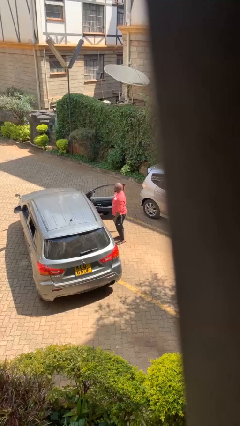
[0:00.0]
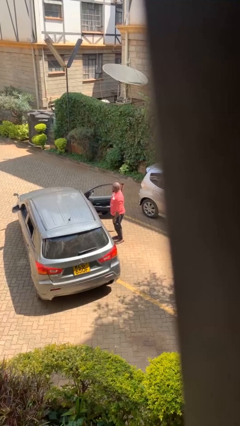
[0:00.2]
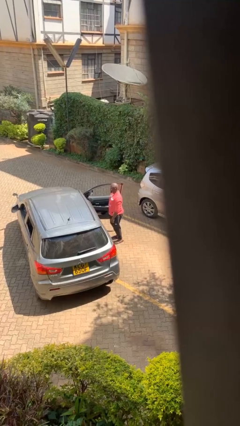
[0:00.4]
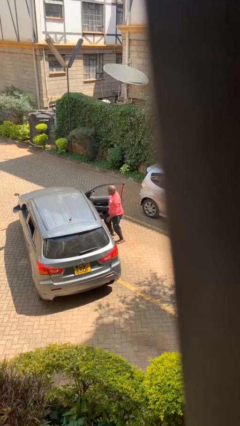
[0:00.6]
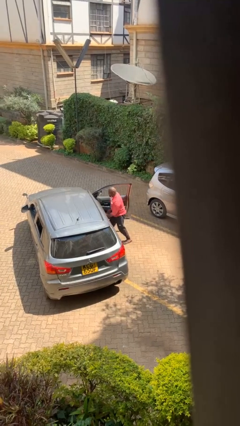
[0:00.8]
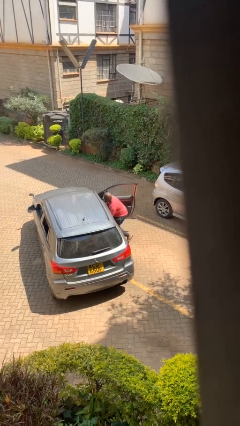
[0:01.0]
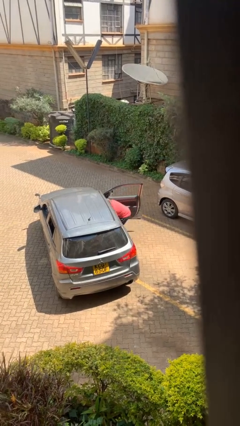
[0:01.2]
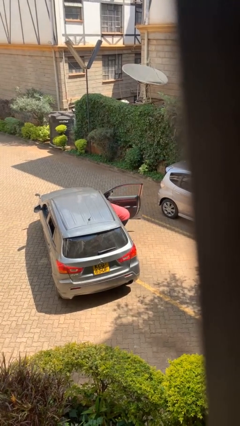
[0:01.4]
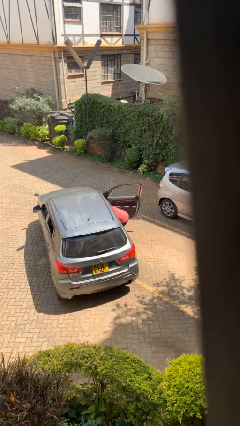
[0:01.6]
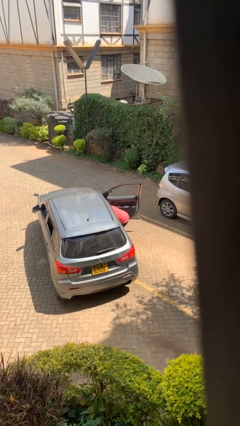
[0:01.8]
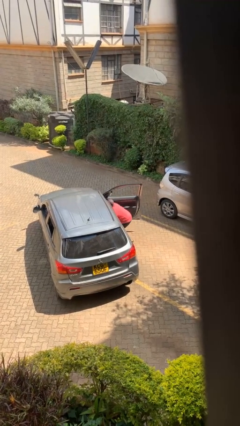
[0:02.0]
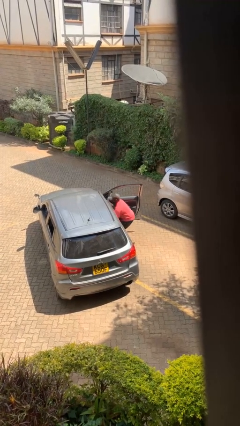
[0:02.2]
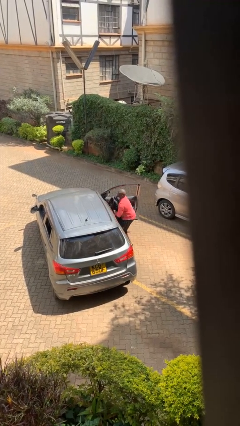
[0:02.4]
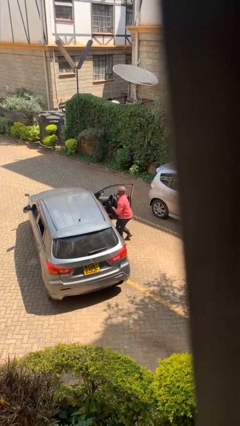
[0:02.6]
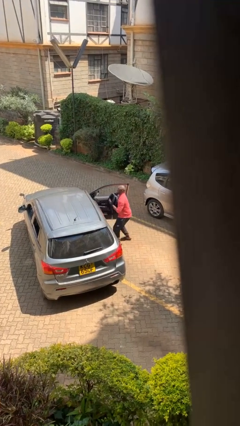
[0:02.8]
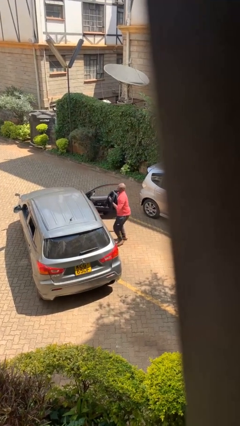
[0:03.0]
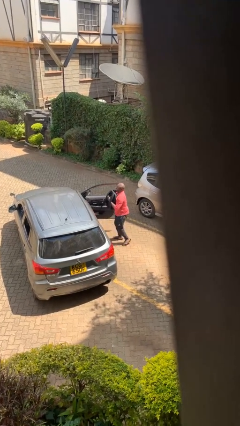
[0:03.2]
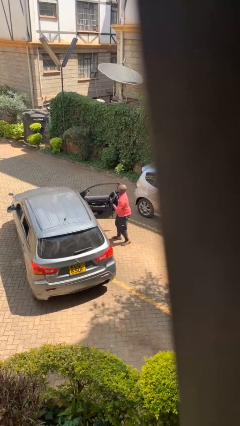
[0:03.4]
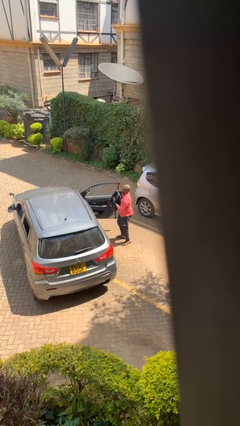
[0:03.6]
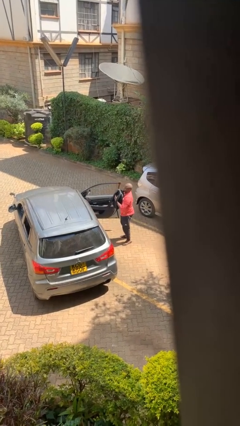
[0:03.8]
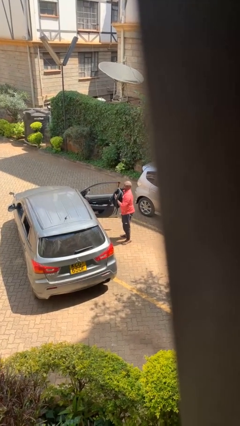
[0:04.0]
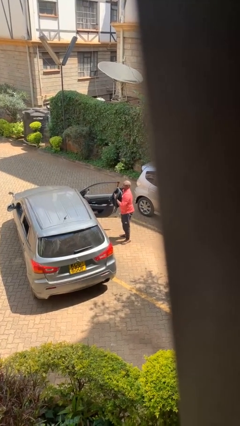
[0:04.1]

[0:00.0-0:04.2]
person unloads car

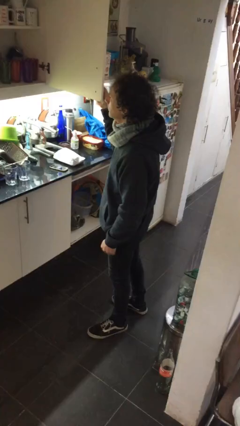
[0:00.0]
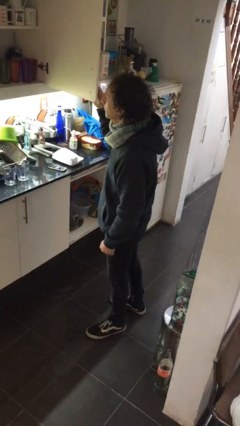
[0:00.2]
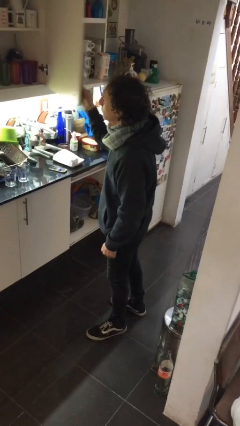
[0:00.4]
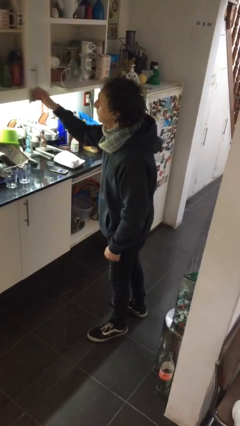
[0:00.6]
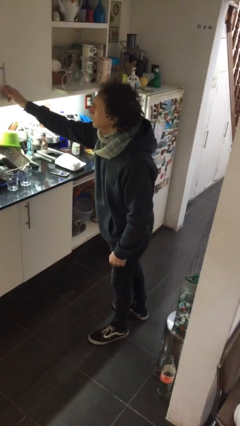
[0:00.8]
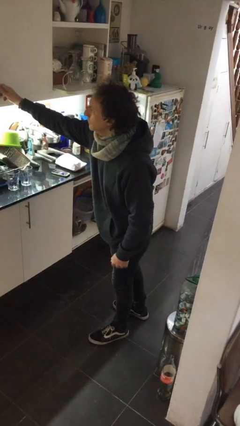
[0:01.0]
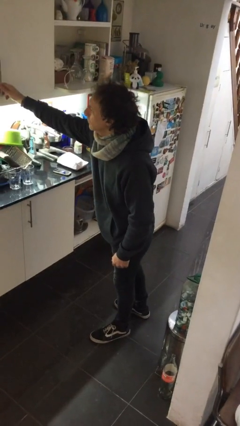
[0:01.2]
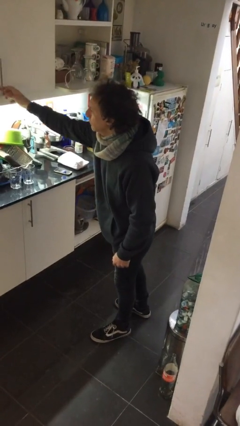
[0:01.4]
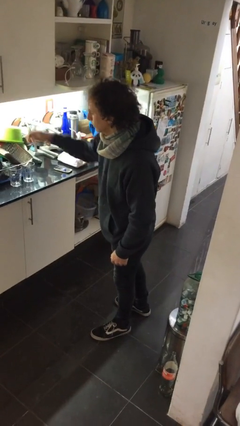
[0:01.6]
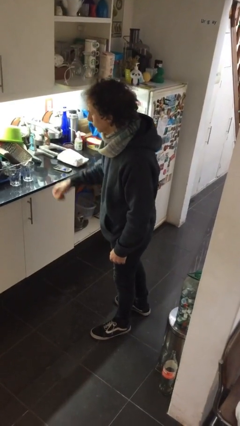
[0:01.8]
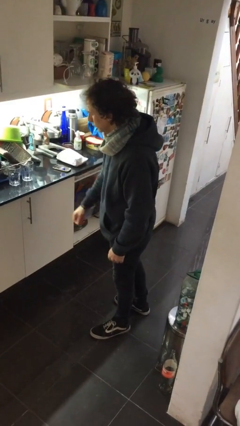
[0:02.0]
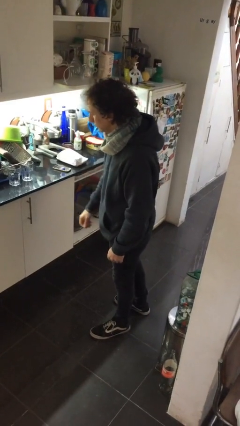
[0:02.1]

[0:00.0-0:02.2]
person closes cabinet

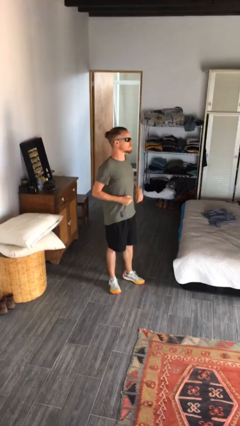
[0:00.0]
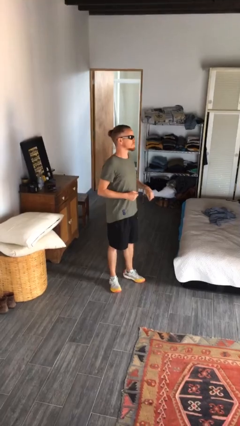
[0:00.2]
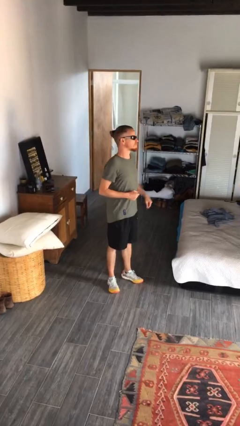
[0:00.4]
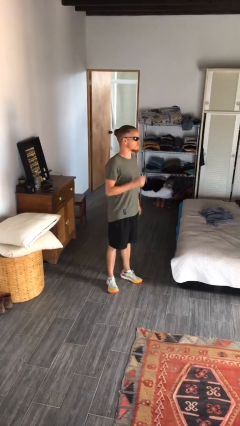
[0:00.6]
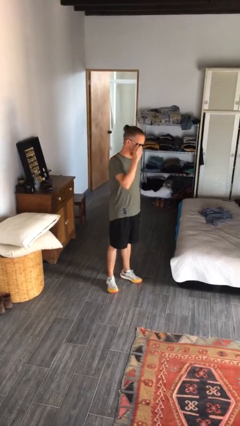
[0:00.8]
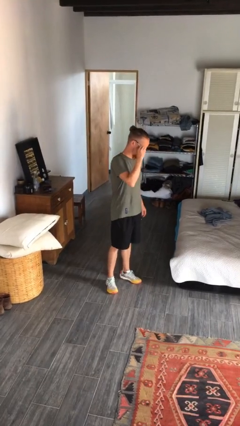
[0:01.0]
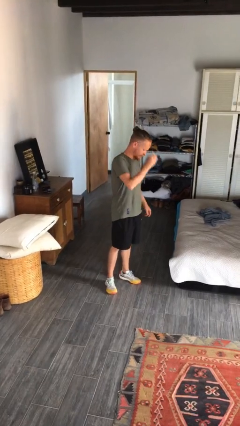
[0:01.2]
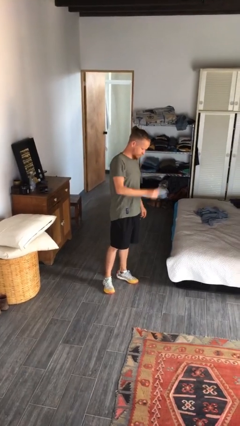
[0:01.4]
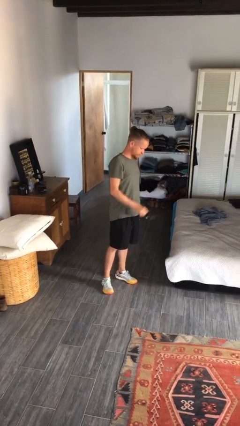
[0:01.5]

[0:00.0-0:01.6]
person takes off sunglasses

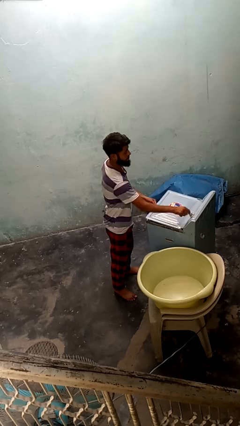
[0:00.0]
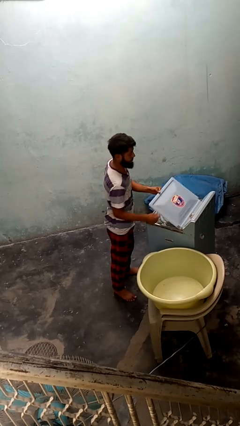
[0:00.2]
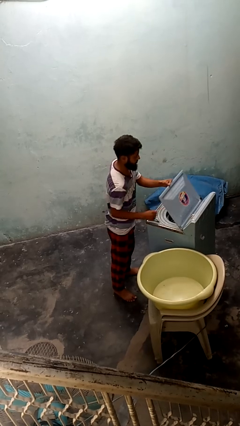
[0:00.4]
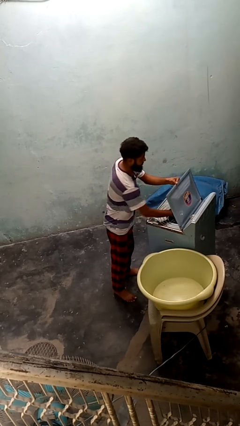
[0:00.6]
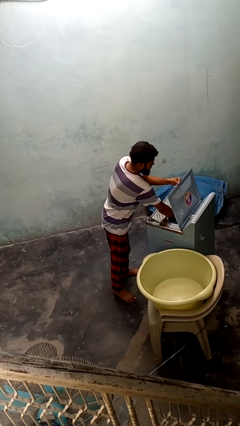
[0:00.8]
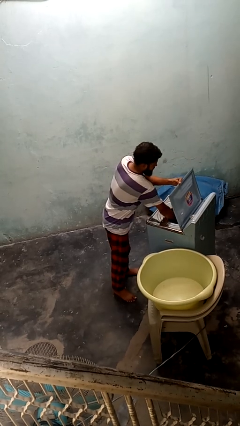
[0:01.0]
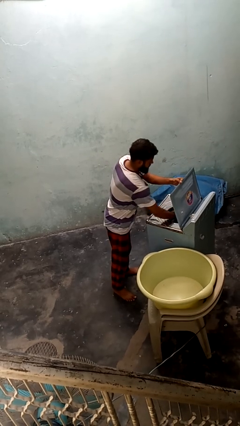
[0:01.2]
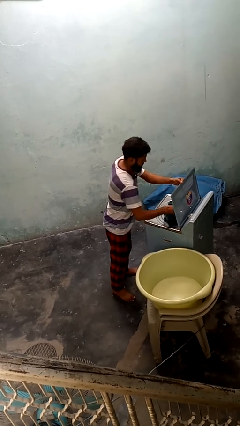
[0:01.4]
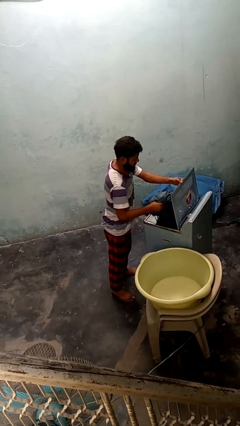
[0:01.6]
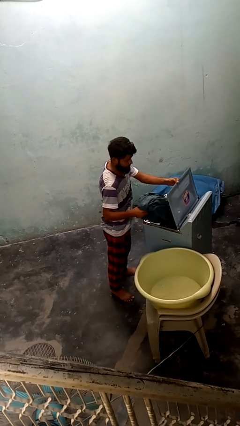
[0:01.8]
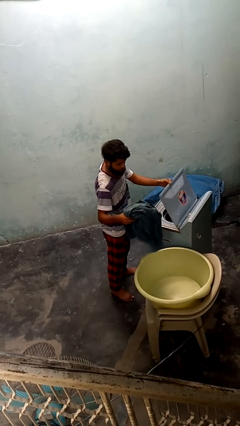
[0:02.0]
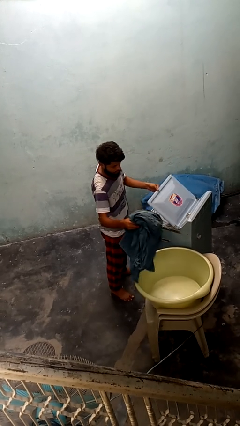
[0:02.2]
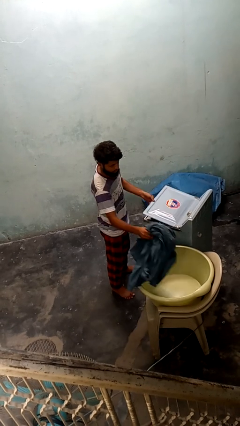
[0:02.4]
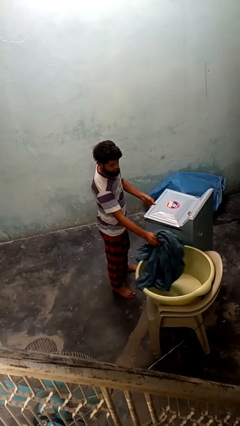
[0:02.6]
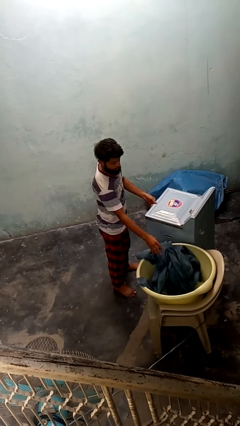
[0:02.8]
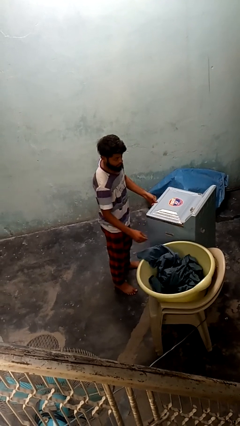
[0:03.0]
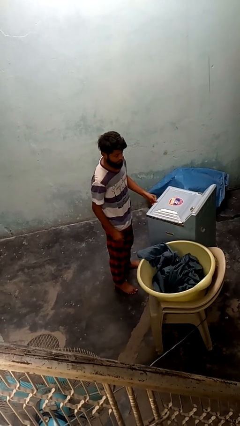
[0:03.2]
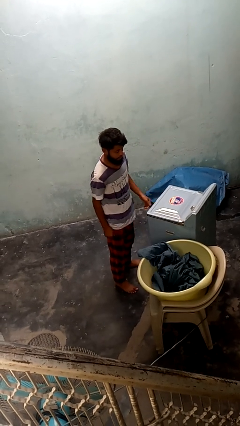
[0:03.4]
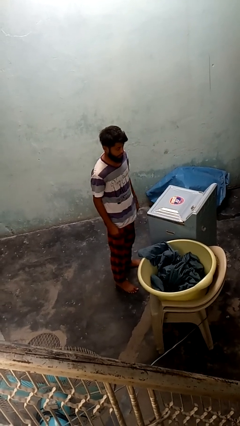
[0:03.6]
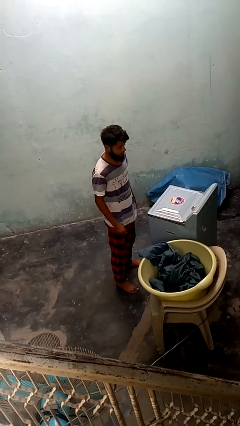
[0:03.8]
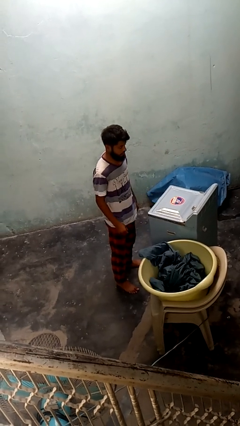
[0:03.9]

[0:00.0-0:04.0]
person unloads dryer

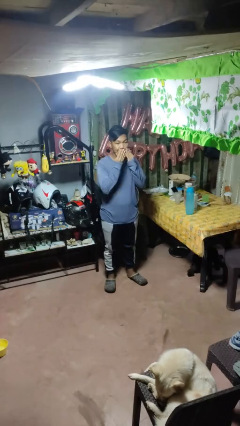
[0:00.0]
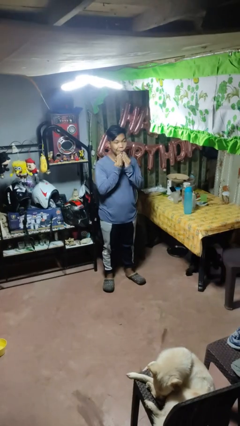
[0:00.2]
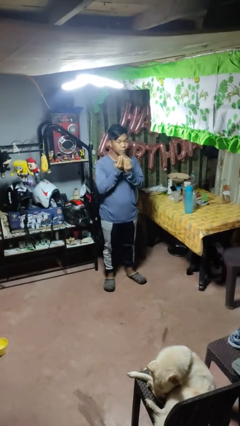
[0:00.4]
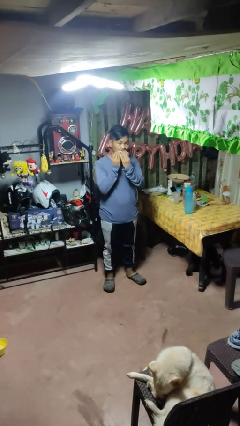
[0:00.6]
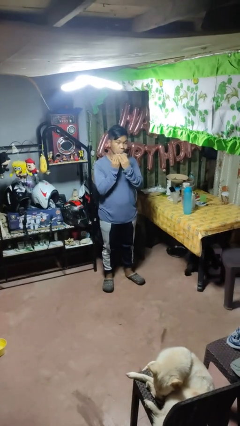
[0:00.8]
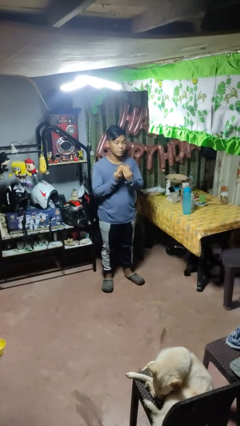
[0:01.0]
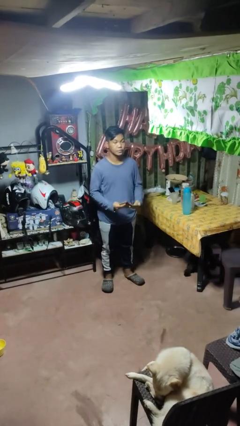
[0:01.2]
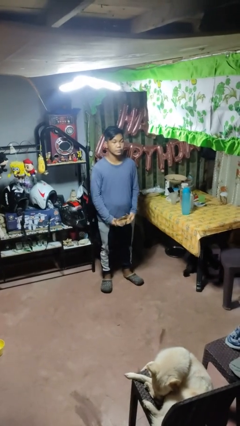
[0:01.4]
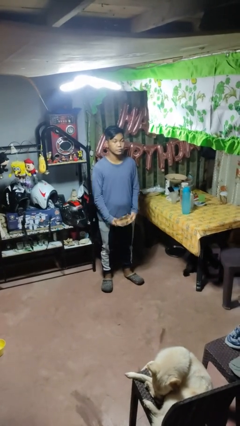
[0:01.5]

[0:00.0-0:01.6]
person wipes mouth with napkin

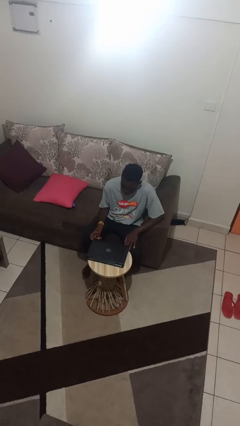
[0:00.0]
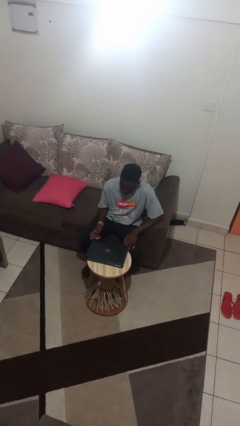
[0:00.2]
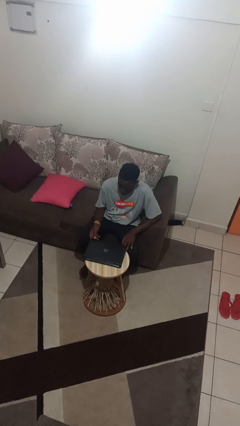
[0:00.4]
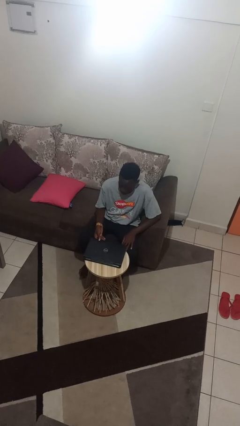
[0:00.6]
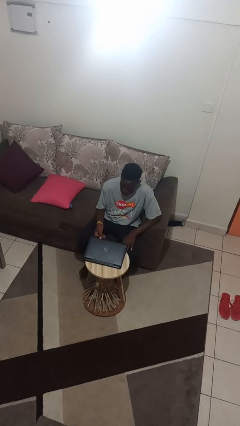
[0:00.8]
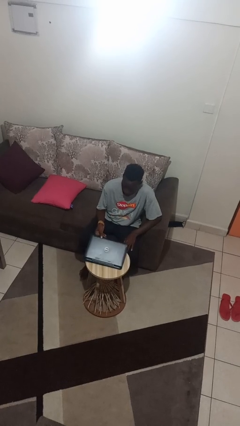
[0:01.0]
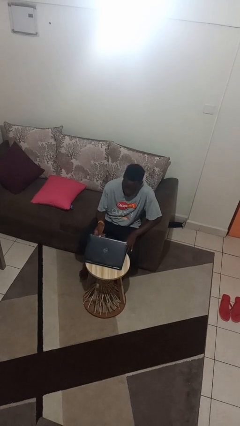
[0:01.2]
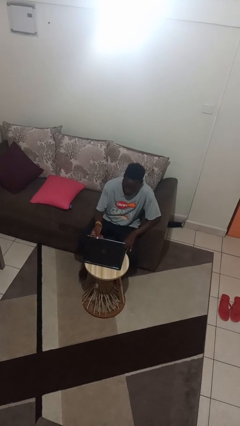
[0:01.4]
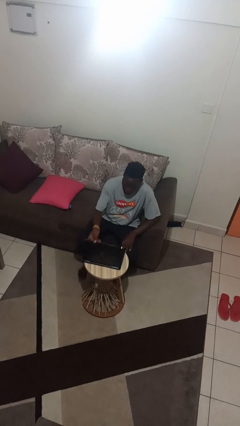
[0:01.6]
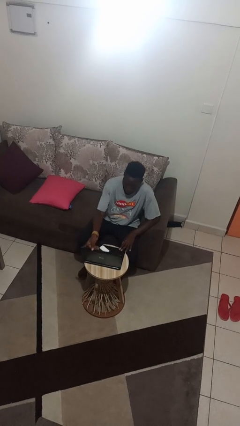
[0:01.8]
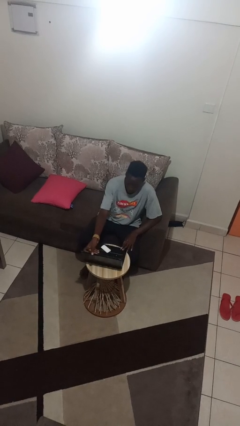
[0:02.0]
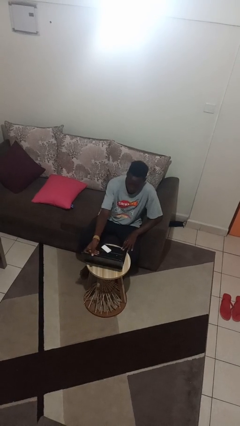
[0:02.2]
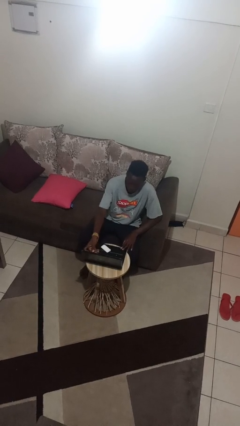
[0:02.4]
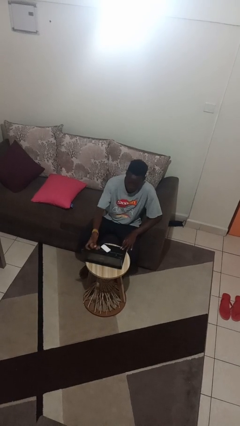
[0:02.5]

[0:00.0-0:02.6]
person opens laptop

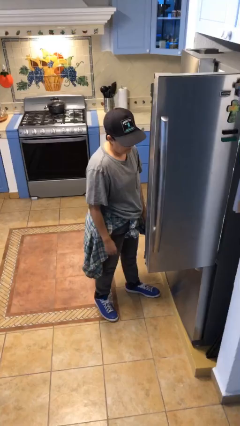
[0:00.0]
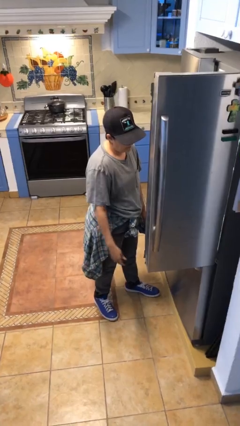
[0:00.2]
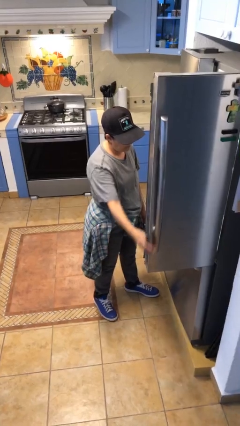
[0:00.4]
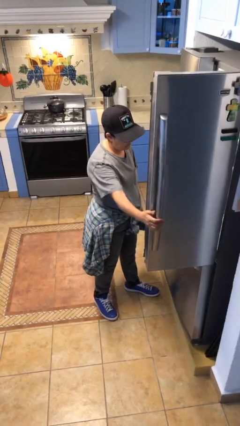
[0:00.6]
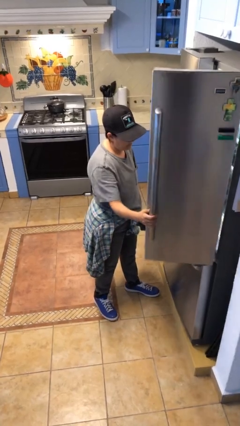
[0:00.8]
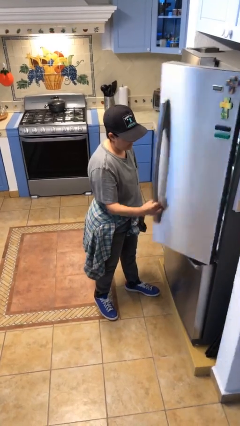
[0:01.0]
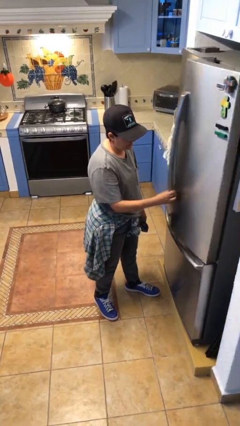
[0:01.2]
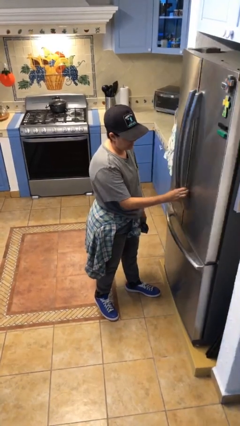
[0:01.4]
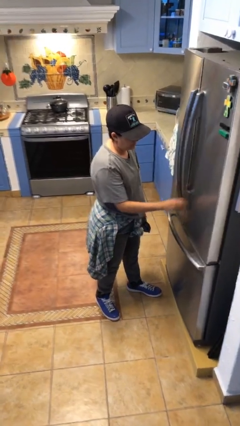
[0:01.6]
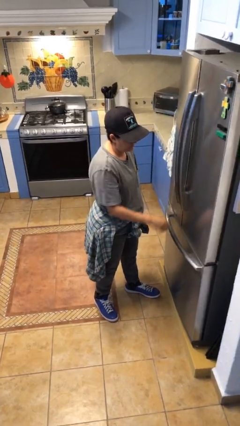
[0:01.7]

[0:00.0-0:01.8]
person closes refrigerator
